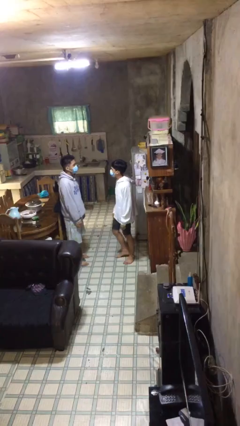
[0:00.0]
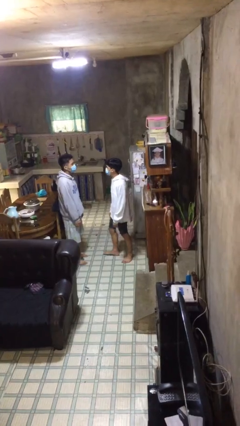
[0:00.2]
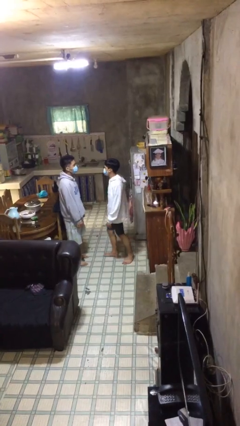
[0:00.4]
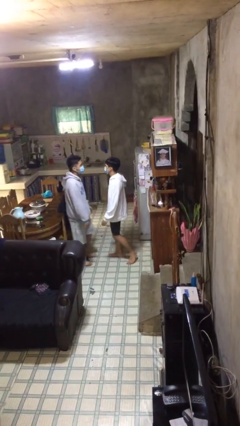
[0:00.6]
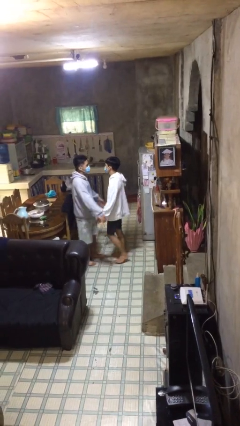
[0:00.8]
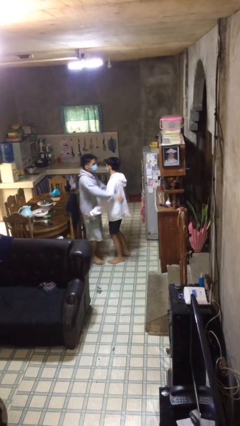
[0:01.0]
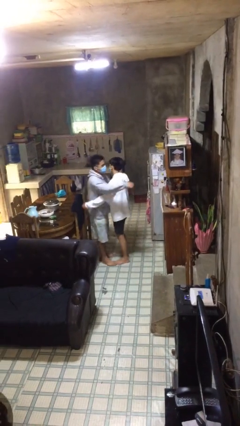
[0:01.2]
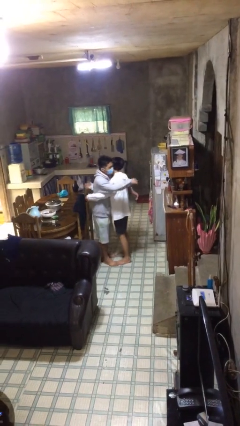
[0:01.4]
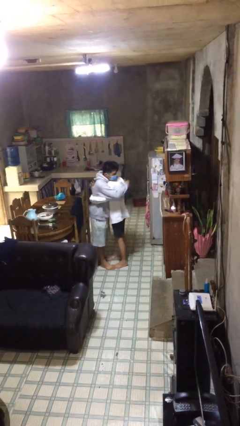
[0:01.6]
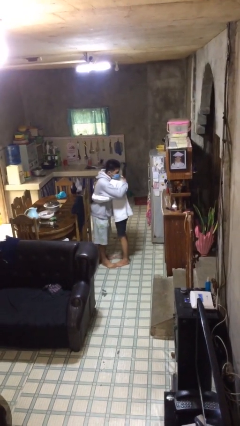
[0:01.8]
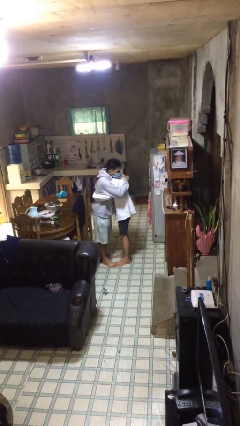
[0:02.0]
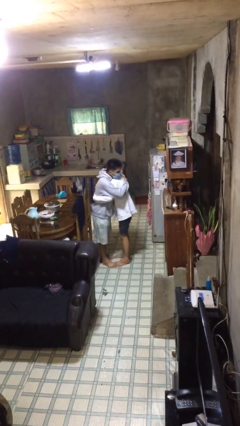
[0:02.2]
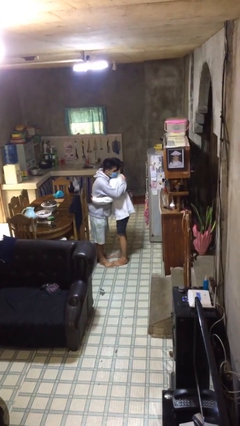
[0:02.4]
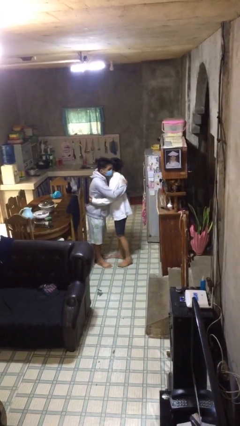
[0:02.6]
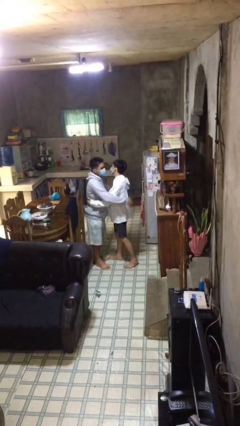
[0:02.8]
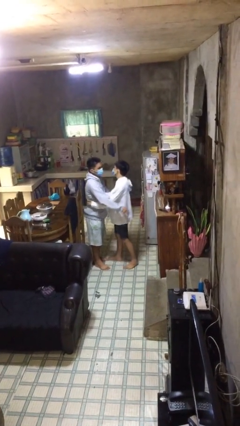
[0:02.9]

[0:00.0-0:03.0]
person embraces person

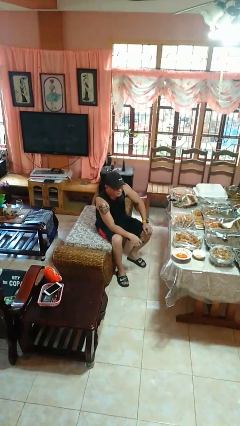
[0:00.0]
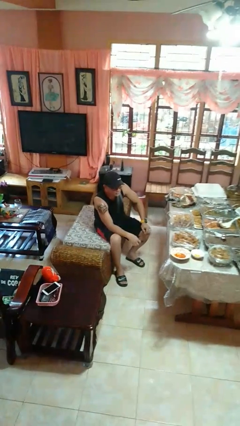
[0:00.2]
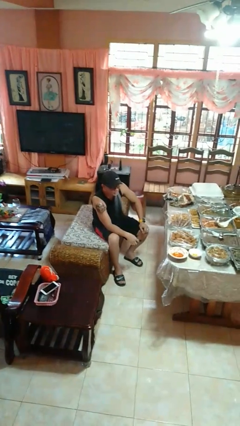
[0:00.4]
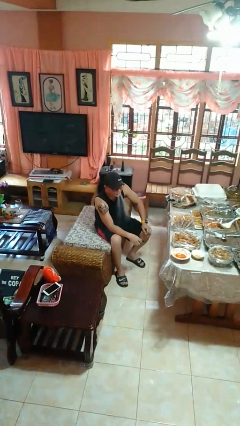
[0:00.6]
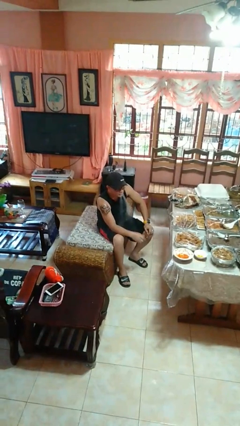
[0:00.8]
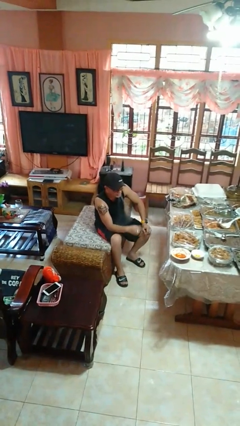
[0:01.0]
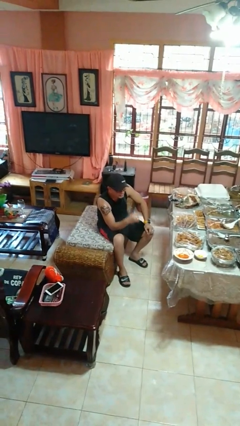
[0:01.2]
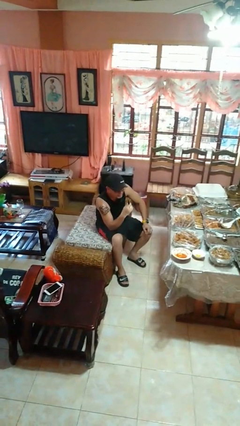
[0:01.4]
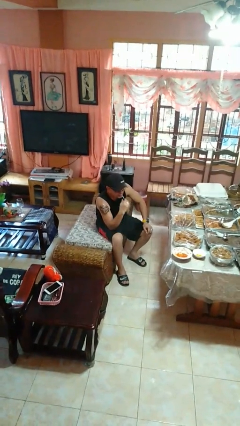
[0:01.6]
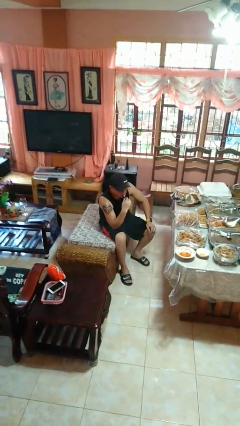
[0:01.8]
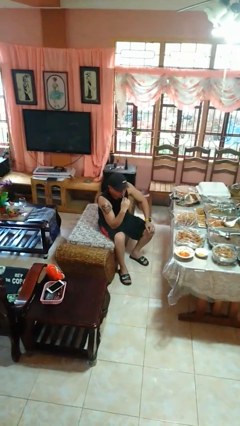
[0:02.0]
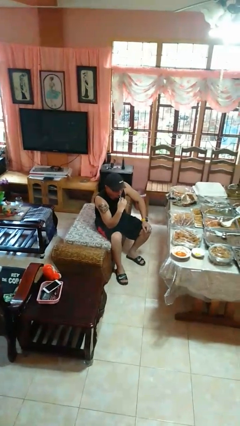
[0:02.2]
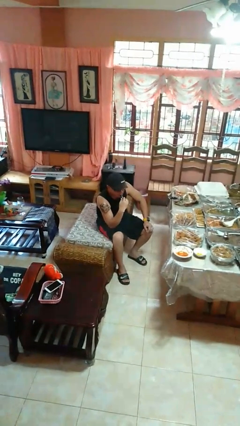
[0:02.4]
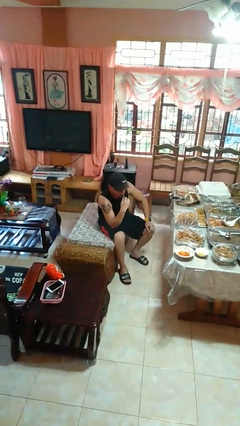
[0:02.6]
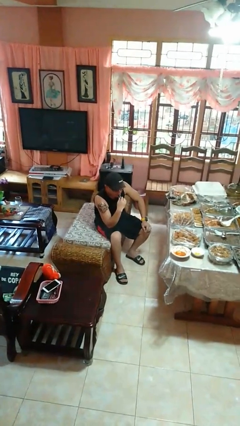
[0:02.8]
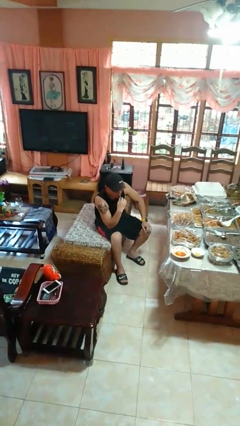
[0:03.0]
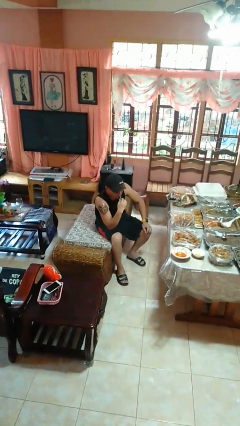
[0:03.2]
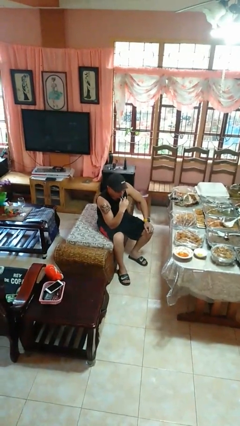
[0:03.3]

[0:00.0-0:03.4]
person vapes

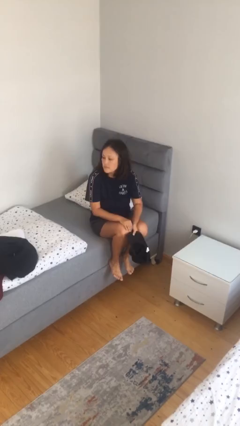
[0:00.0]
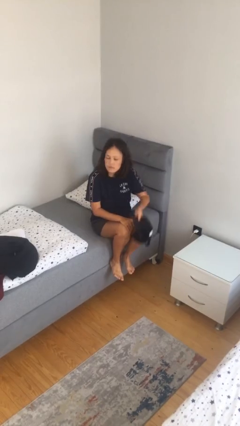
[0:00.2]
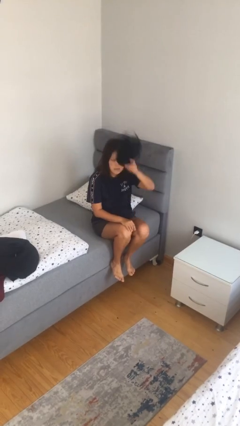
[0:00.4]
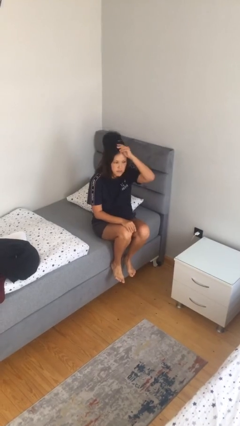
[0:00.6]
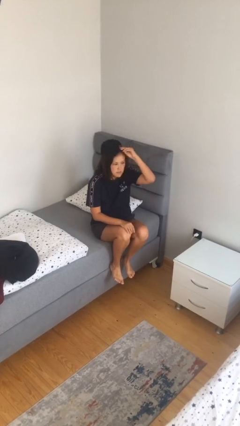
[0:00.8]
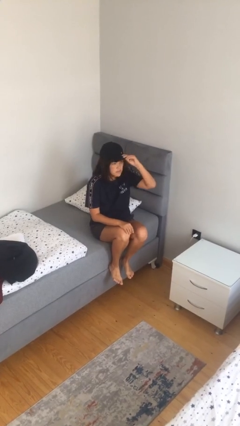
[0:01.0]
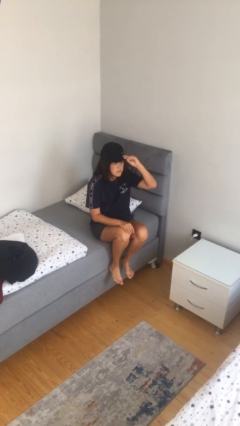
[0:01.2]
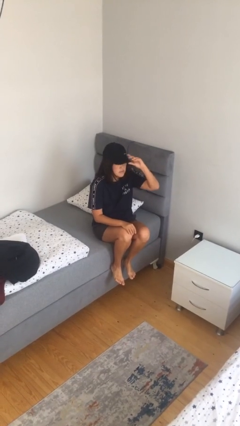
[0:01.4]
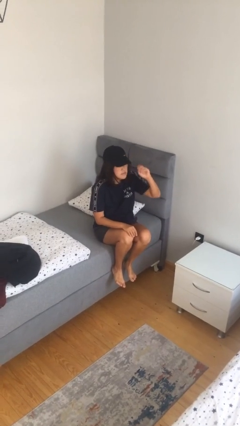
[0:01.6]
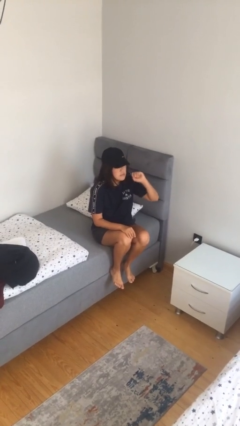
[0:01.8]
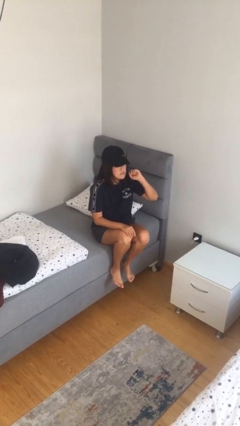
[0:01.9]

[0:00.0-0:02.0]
person puts on hat

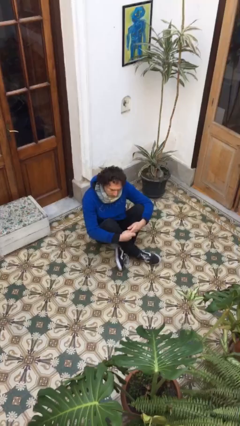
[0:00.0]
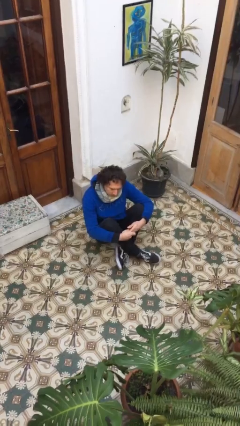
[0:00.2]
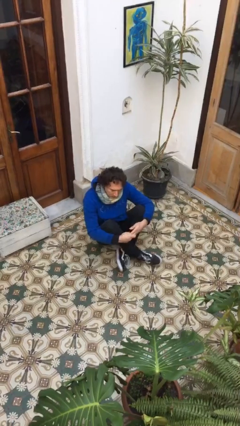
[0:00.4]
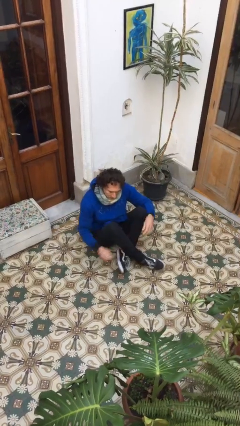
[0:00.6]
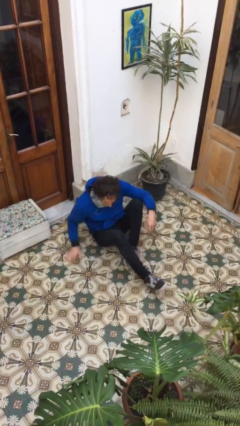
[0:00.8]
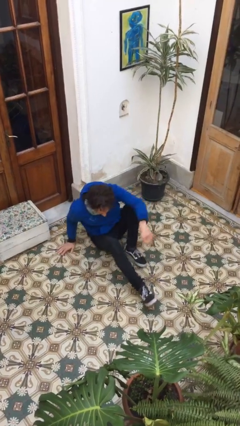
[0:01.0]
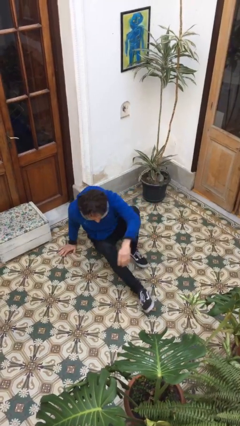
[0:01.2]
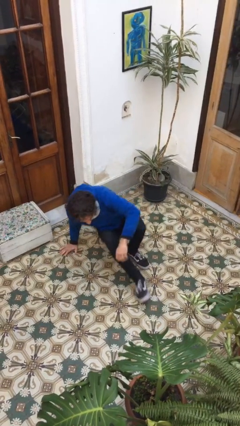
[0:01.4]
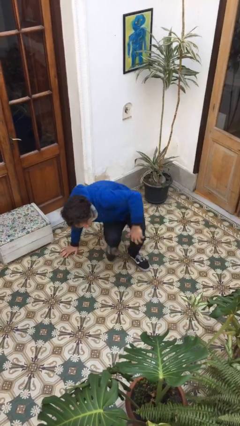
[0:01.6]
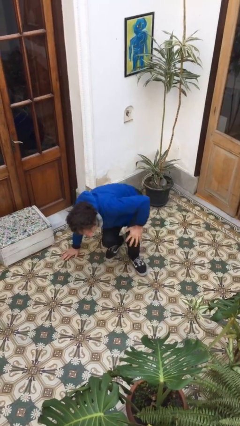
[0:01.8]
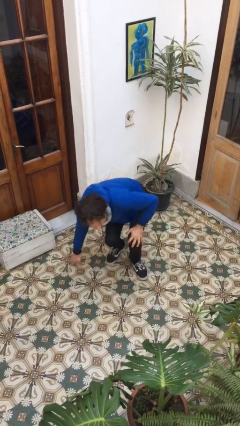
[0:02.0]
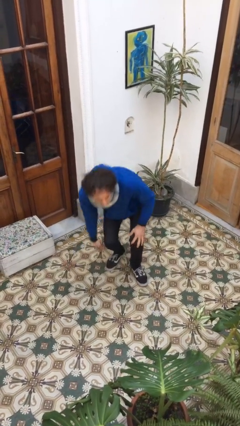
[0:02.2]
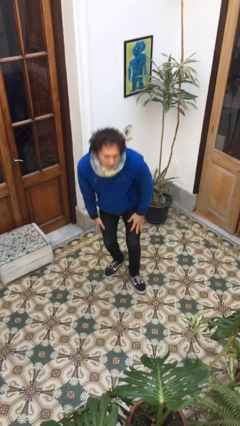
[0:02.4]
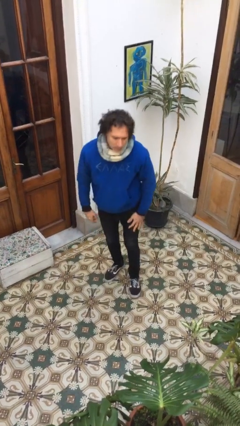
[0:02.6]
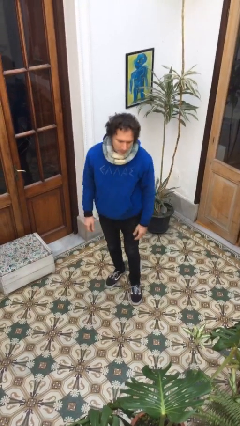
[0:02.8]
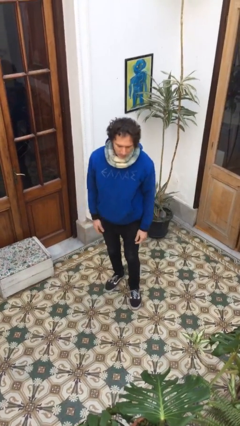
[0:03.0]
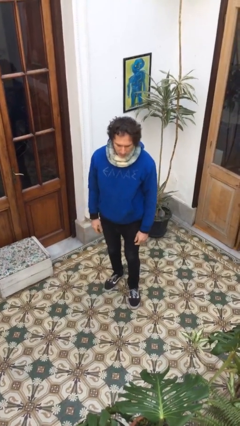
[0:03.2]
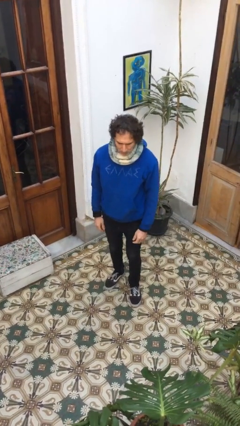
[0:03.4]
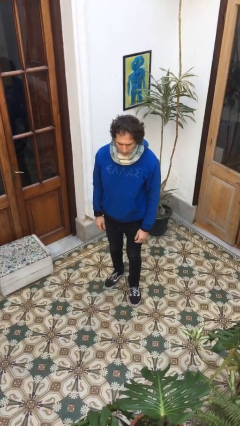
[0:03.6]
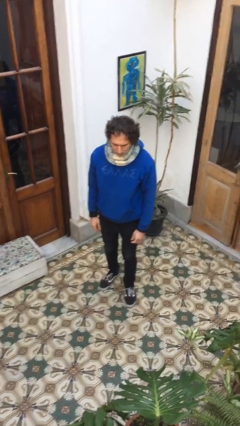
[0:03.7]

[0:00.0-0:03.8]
person stands up from floor

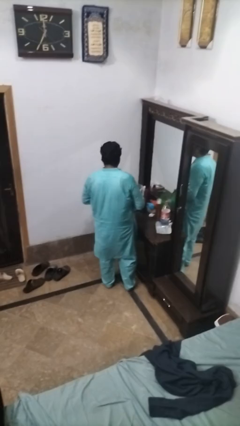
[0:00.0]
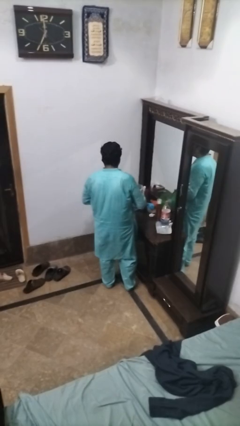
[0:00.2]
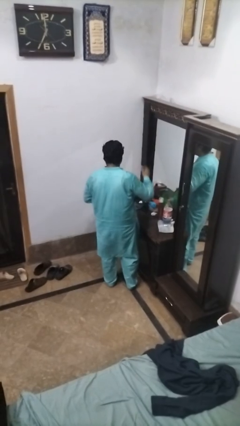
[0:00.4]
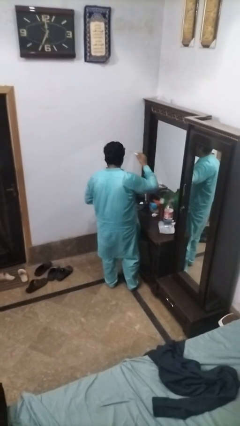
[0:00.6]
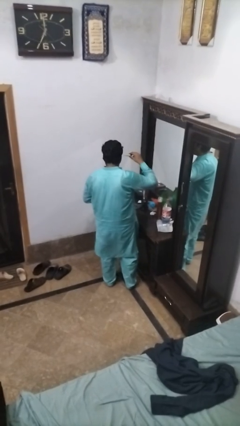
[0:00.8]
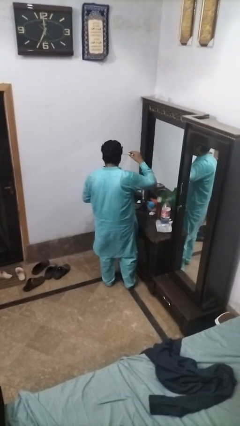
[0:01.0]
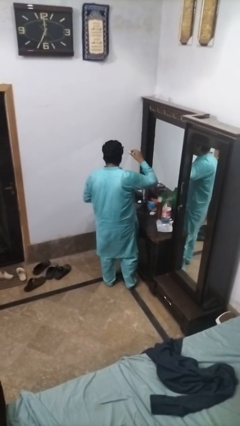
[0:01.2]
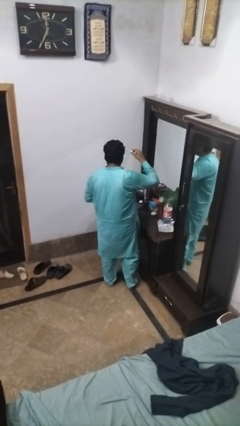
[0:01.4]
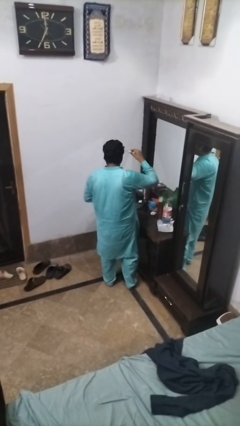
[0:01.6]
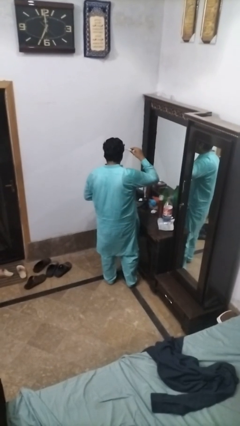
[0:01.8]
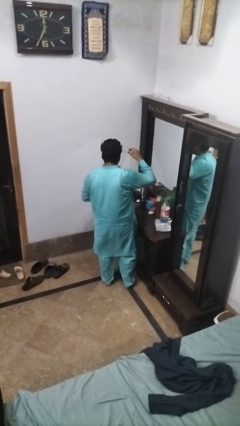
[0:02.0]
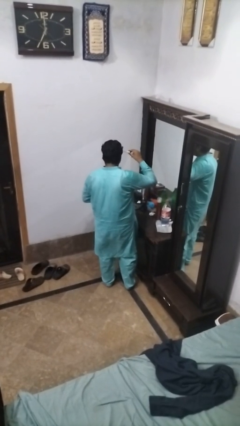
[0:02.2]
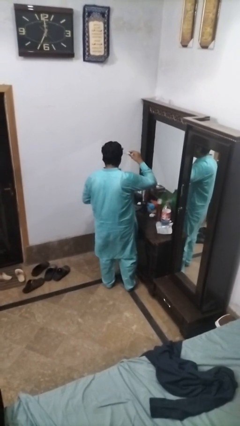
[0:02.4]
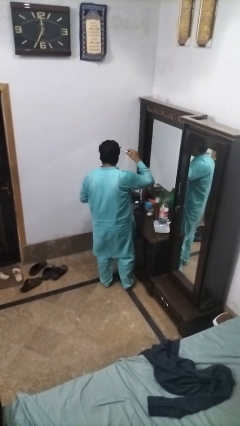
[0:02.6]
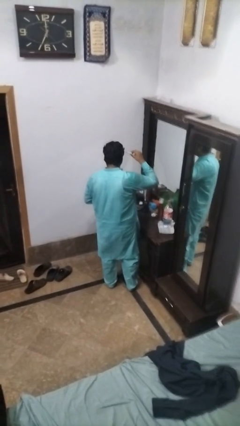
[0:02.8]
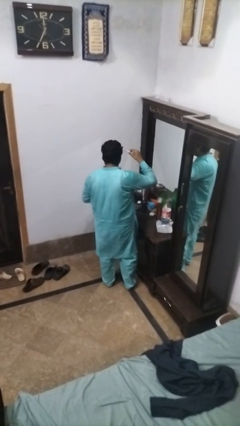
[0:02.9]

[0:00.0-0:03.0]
person applies eye makeup

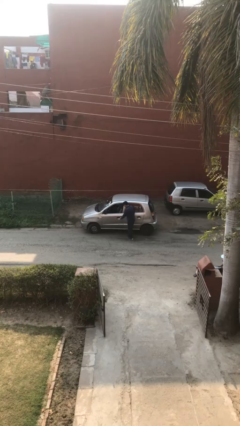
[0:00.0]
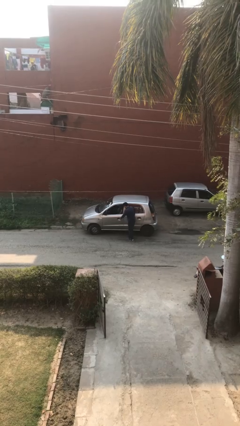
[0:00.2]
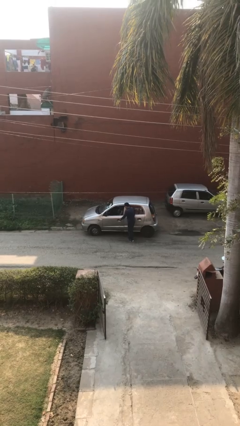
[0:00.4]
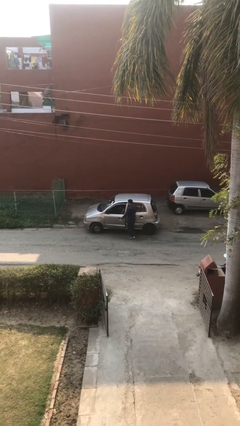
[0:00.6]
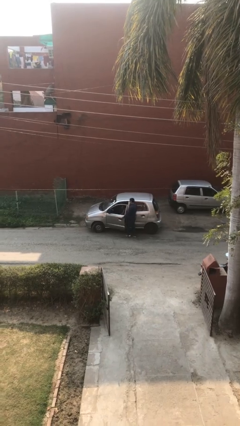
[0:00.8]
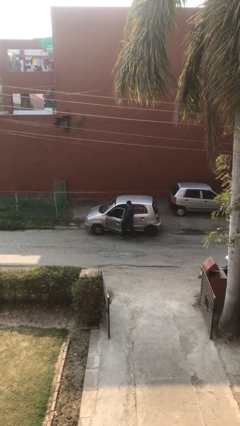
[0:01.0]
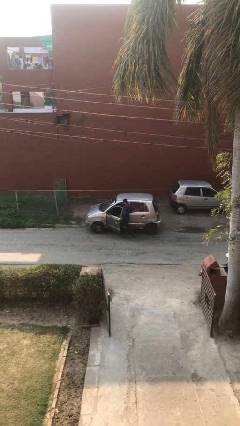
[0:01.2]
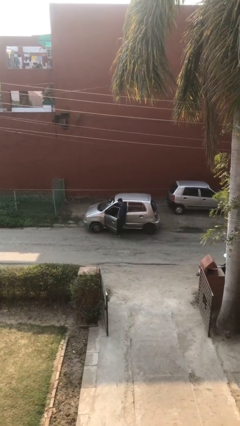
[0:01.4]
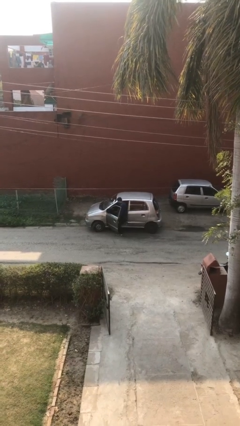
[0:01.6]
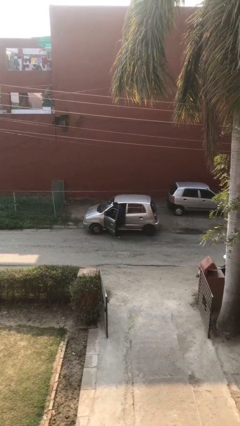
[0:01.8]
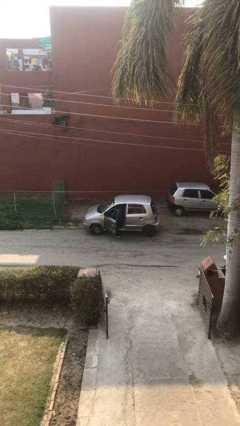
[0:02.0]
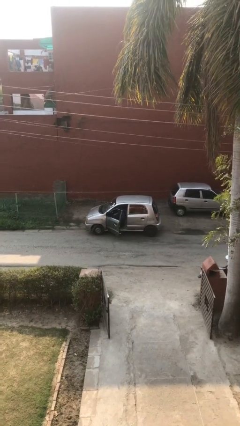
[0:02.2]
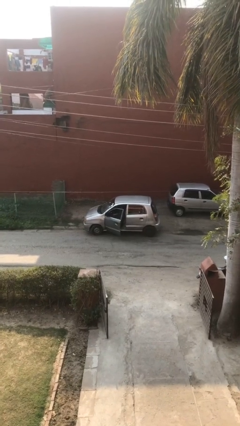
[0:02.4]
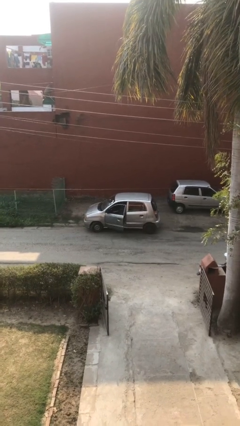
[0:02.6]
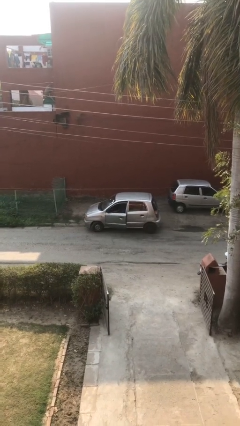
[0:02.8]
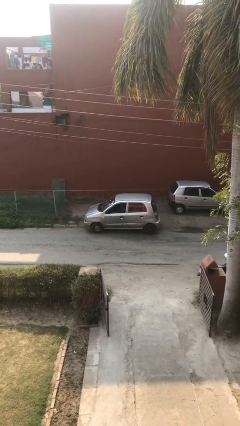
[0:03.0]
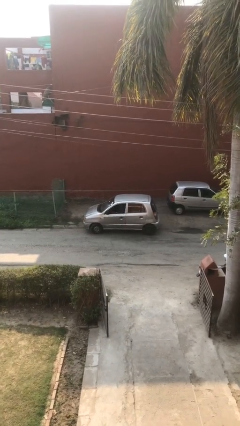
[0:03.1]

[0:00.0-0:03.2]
car picks up person
